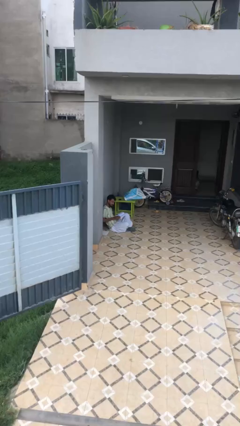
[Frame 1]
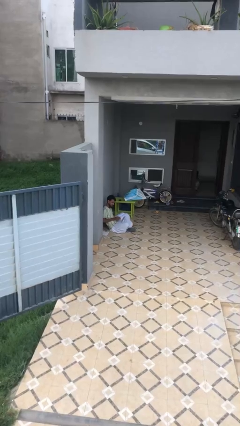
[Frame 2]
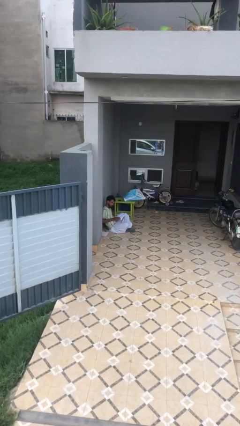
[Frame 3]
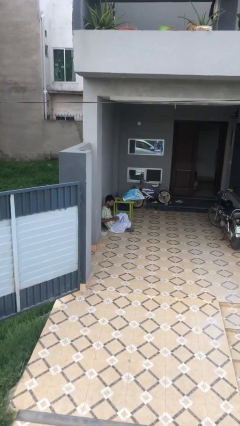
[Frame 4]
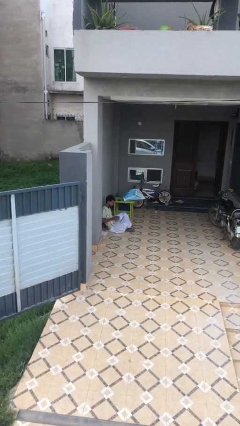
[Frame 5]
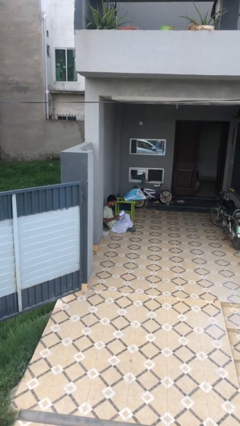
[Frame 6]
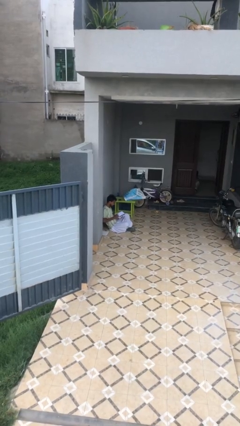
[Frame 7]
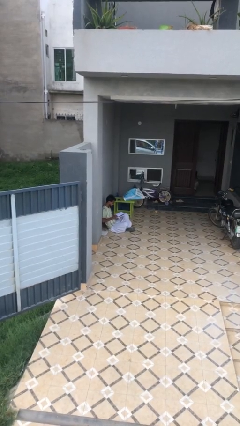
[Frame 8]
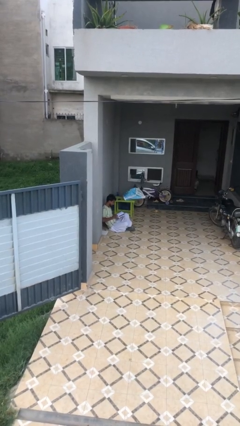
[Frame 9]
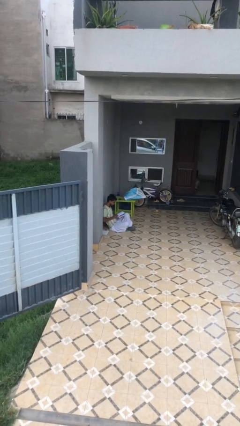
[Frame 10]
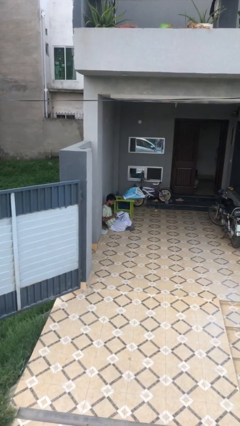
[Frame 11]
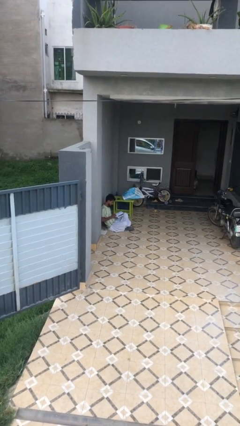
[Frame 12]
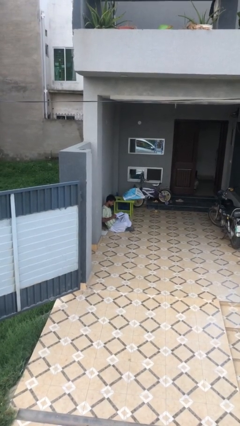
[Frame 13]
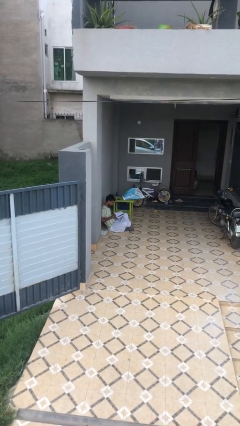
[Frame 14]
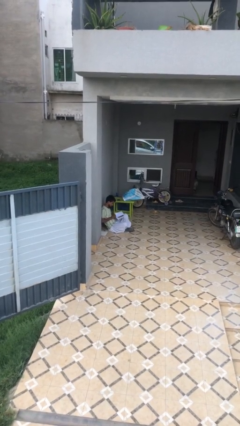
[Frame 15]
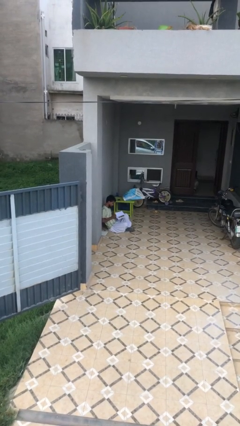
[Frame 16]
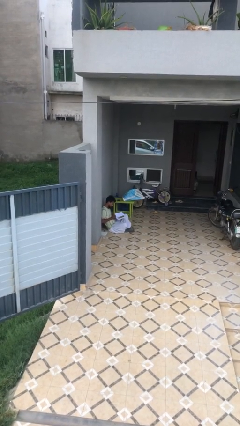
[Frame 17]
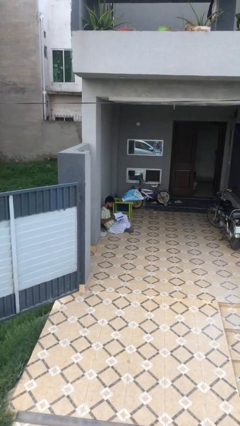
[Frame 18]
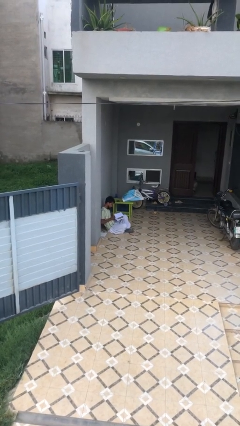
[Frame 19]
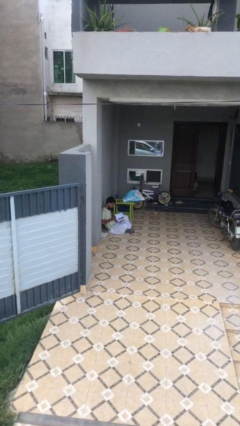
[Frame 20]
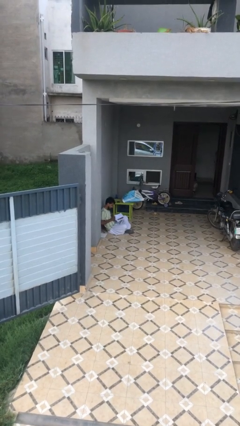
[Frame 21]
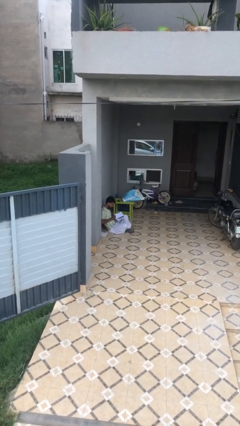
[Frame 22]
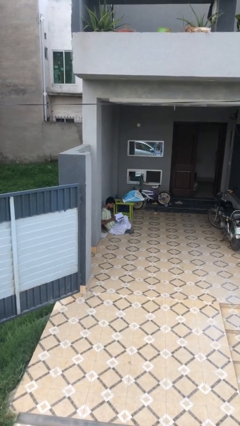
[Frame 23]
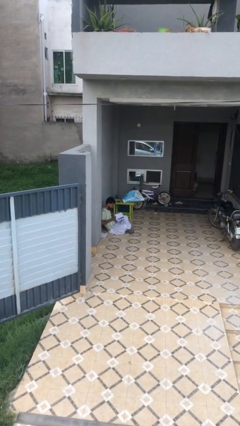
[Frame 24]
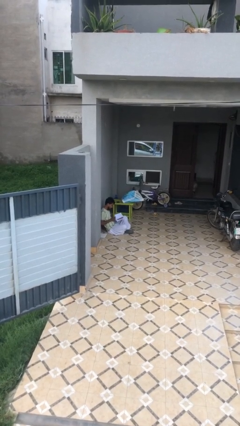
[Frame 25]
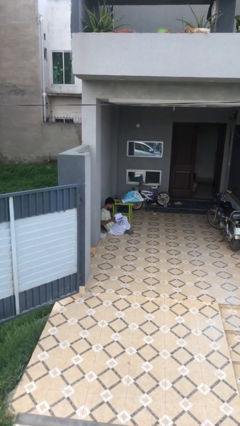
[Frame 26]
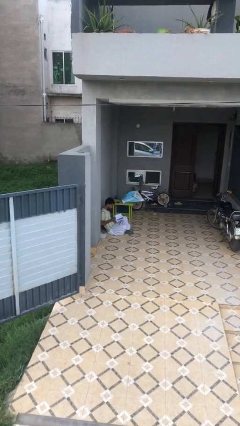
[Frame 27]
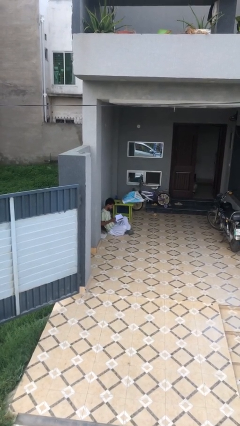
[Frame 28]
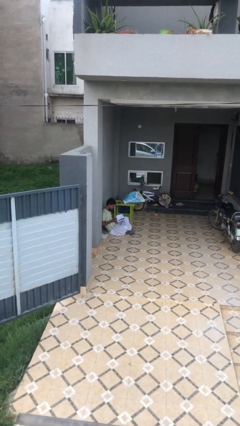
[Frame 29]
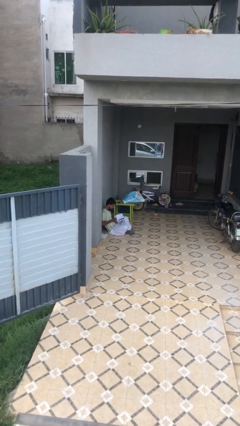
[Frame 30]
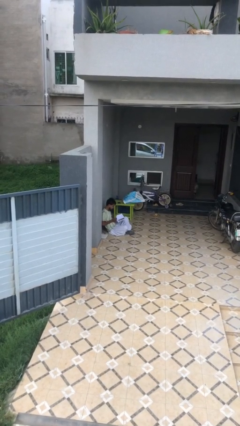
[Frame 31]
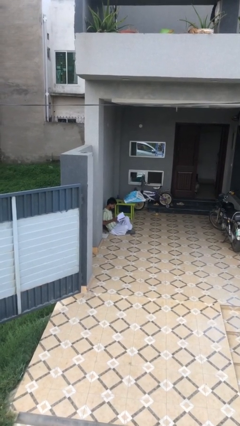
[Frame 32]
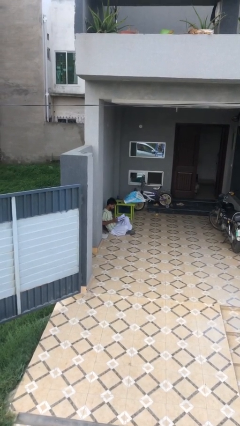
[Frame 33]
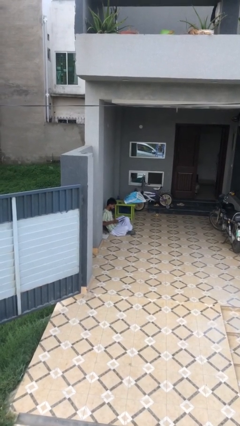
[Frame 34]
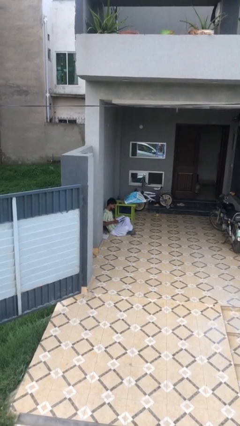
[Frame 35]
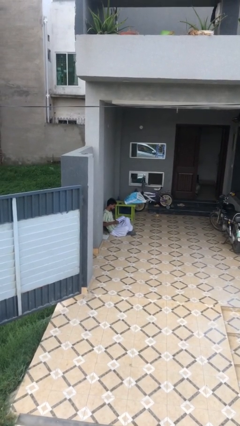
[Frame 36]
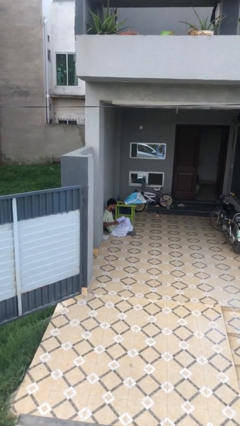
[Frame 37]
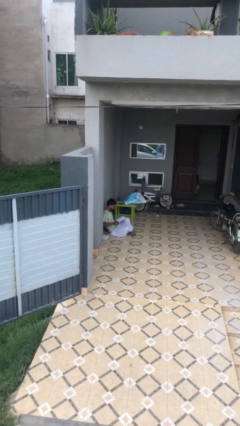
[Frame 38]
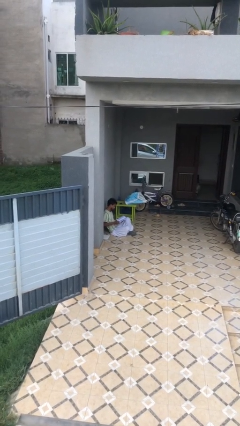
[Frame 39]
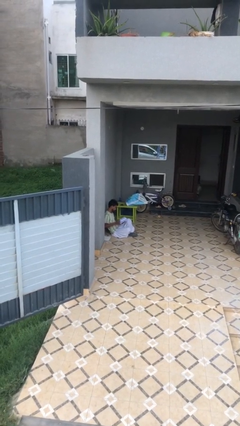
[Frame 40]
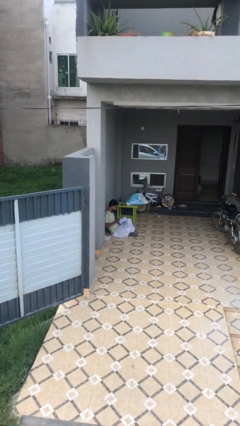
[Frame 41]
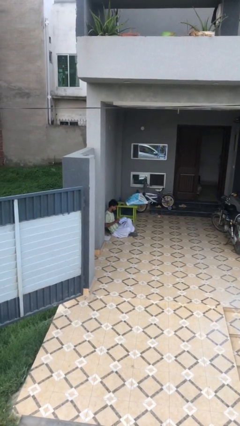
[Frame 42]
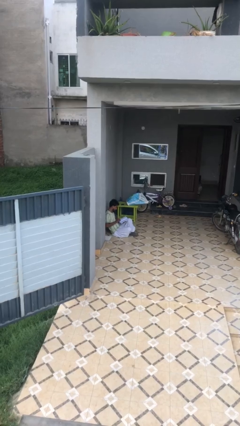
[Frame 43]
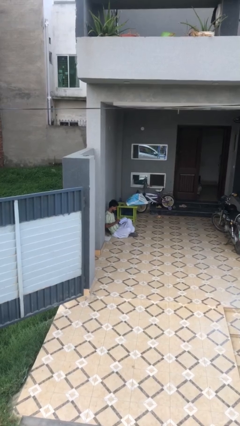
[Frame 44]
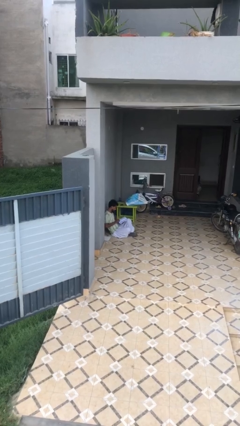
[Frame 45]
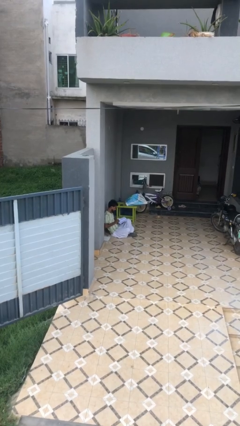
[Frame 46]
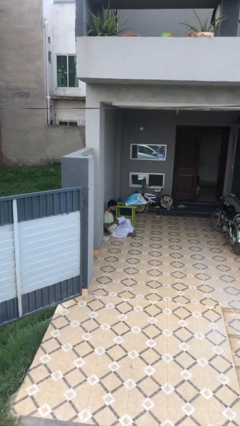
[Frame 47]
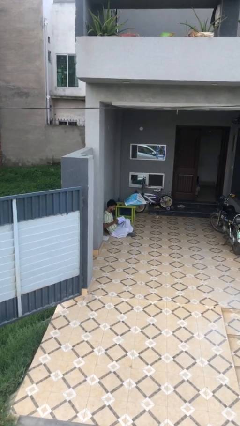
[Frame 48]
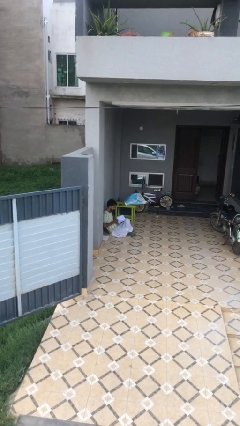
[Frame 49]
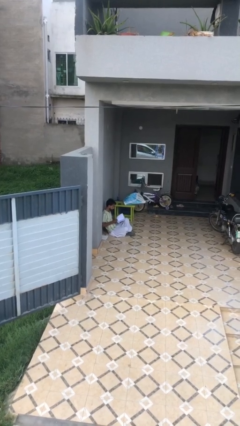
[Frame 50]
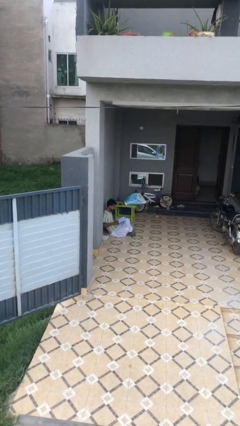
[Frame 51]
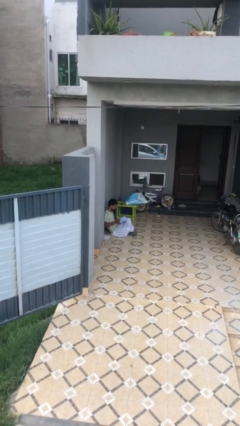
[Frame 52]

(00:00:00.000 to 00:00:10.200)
person reads document

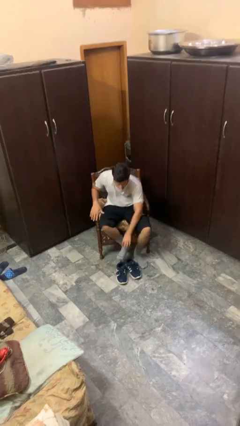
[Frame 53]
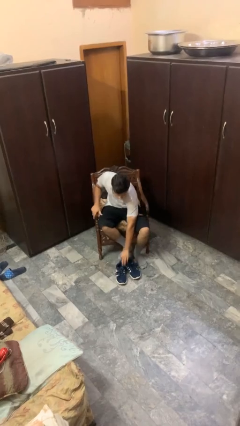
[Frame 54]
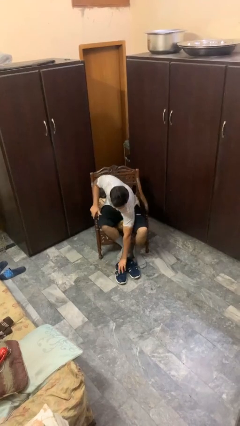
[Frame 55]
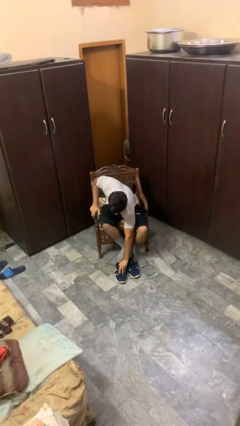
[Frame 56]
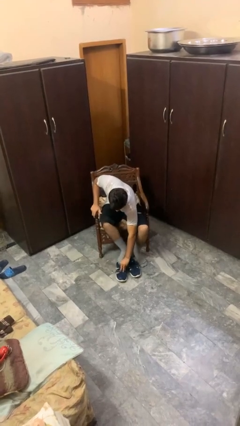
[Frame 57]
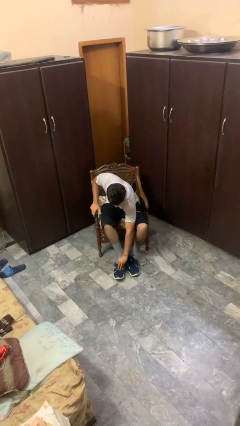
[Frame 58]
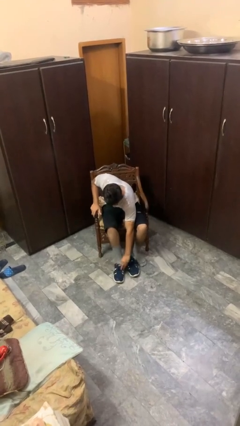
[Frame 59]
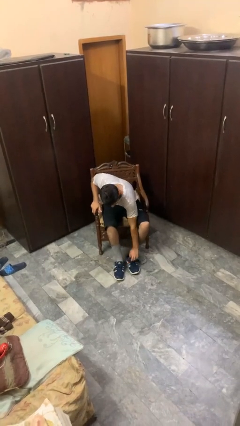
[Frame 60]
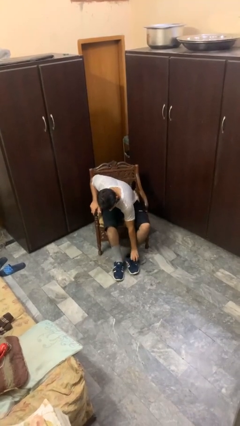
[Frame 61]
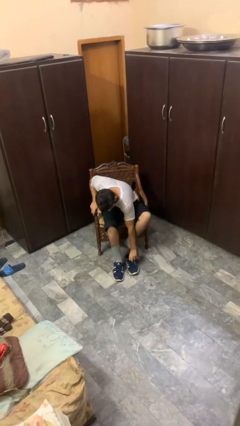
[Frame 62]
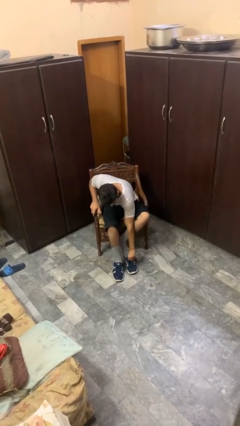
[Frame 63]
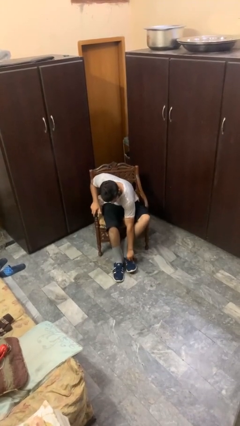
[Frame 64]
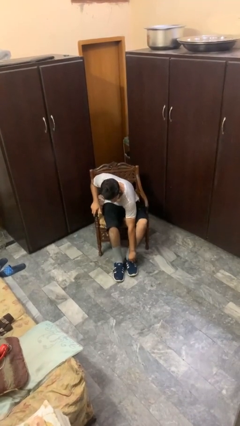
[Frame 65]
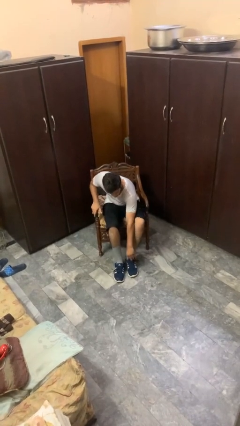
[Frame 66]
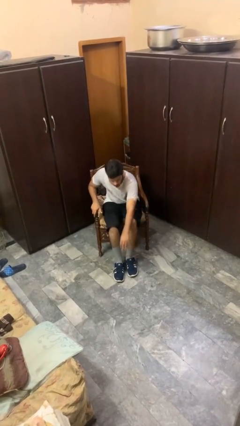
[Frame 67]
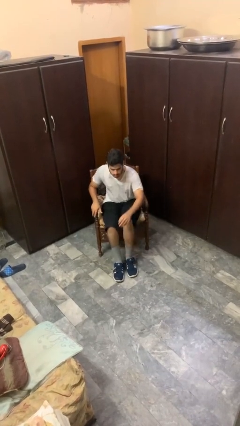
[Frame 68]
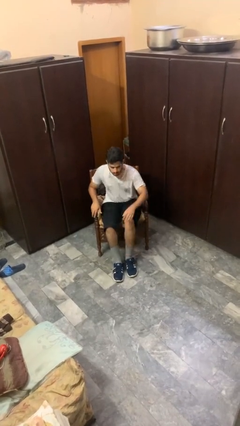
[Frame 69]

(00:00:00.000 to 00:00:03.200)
person puts on shoes

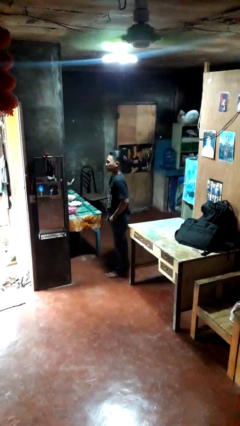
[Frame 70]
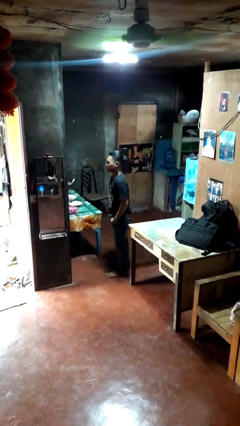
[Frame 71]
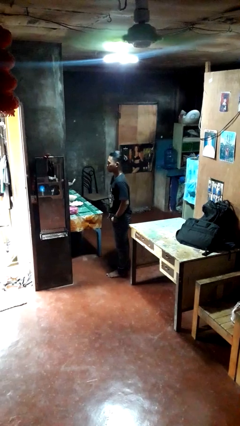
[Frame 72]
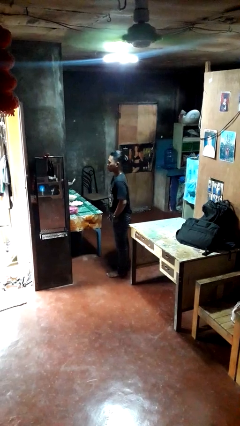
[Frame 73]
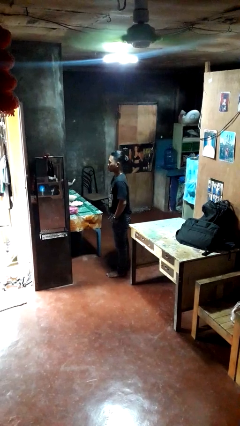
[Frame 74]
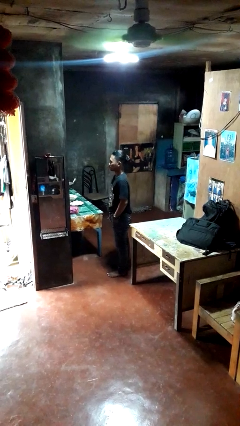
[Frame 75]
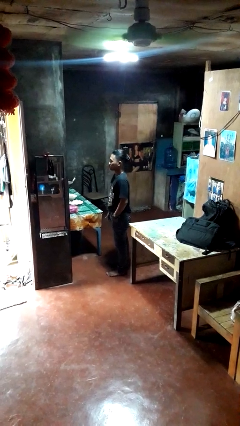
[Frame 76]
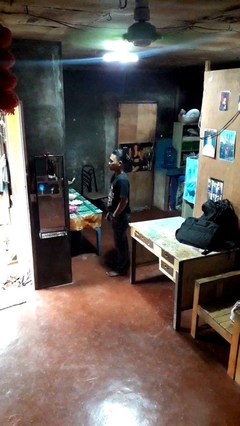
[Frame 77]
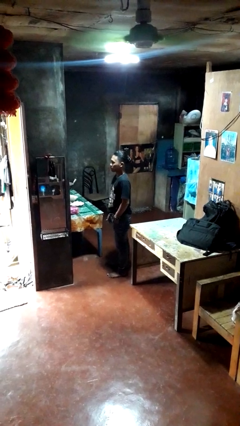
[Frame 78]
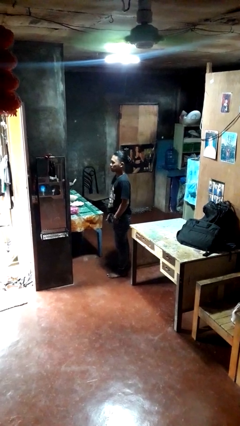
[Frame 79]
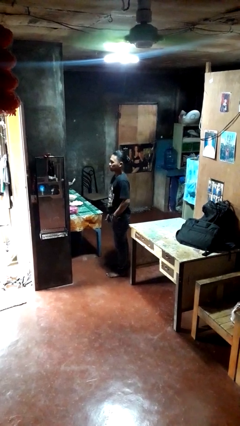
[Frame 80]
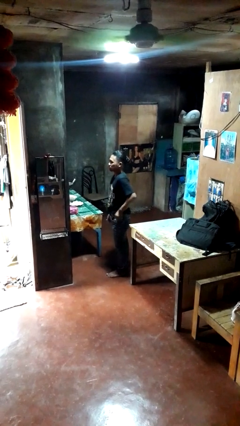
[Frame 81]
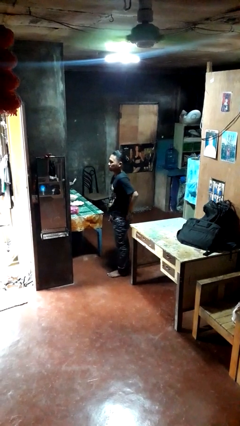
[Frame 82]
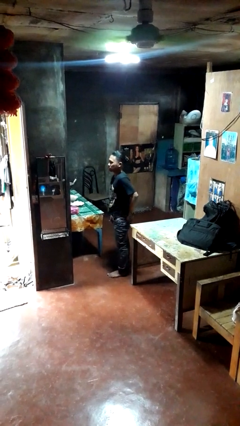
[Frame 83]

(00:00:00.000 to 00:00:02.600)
person puts hands in back pockets

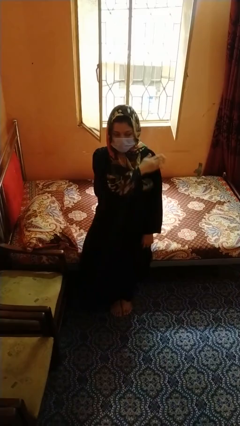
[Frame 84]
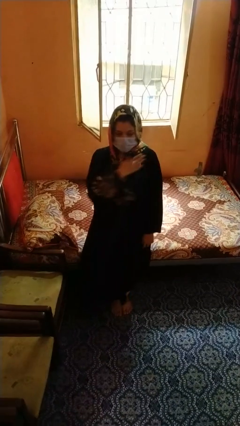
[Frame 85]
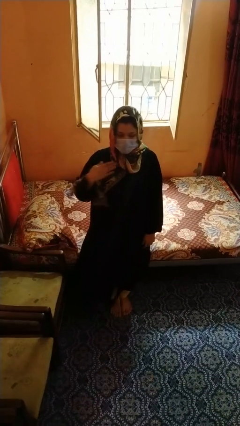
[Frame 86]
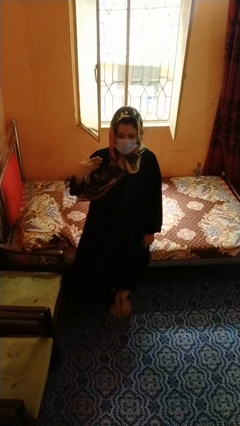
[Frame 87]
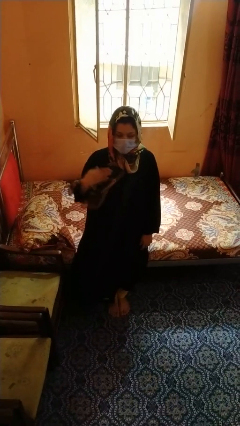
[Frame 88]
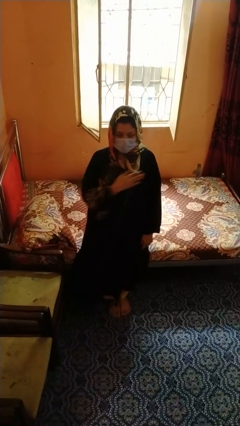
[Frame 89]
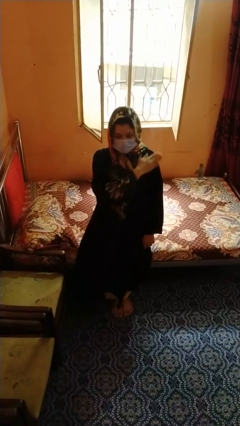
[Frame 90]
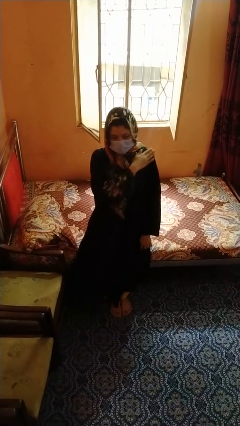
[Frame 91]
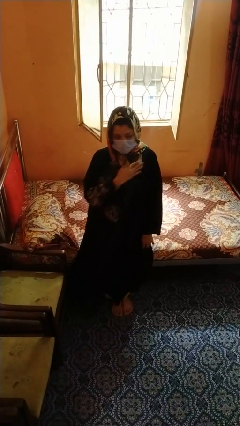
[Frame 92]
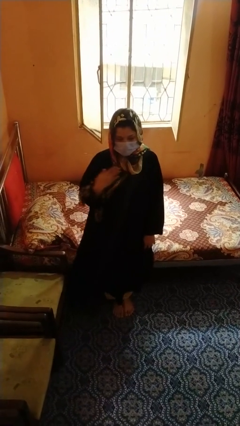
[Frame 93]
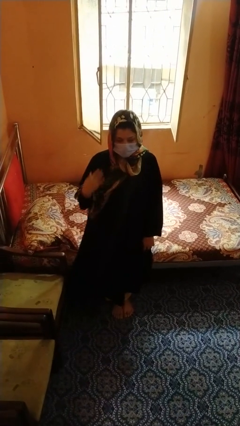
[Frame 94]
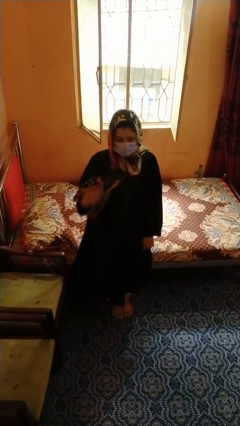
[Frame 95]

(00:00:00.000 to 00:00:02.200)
person gestures cut
